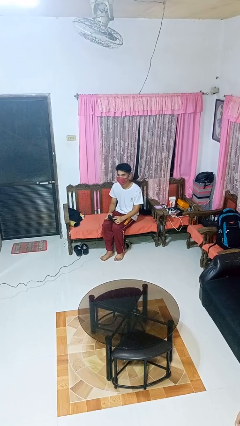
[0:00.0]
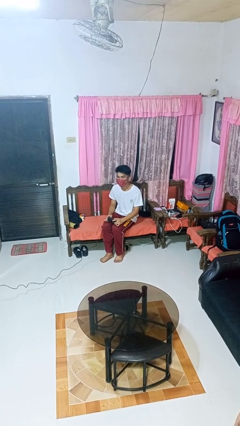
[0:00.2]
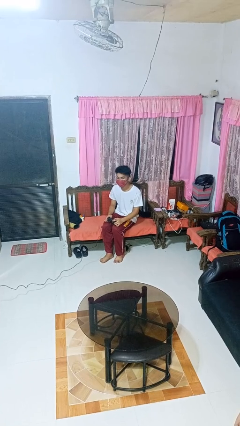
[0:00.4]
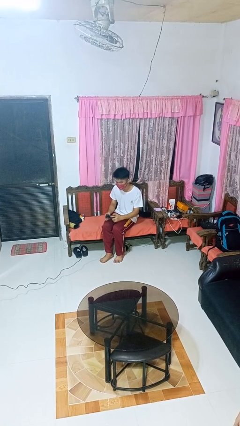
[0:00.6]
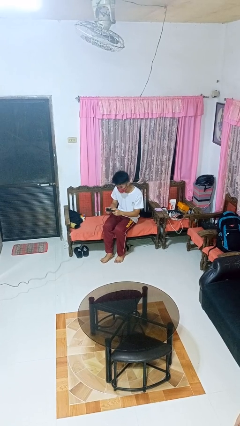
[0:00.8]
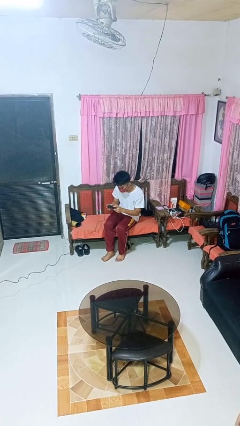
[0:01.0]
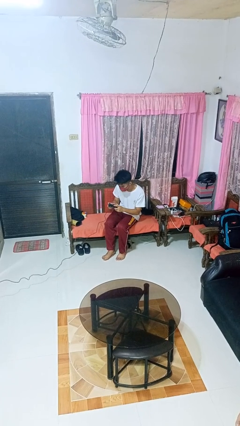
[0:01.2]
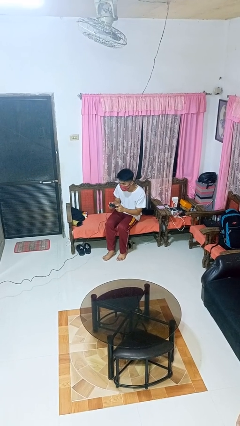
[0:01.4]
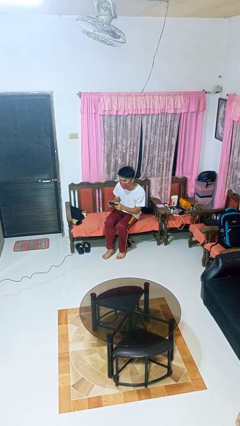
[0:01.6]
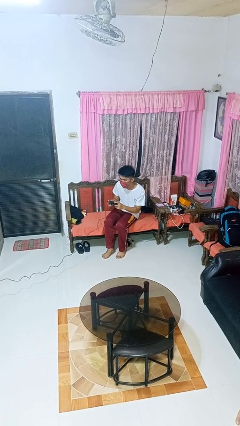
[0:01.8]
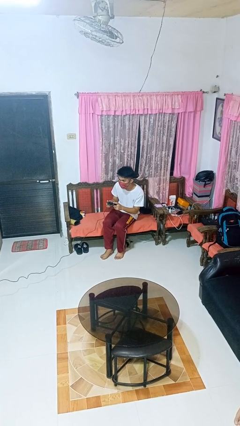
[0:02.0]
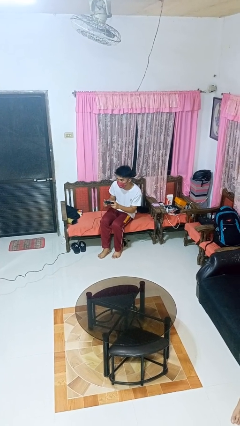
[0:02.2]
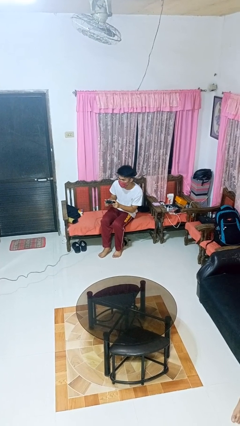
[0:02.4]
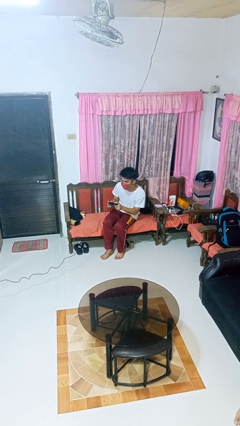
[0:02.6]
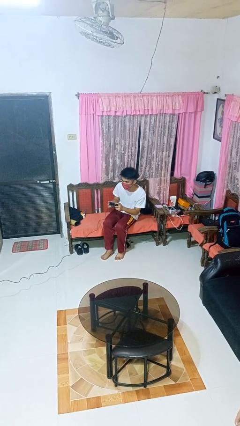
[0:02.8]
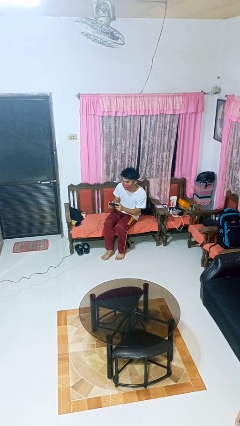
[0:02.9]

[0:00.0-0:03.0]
person interacts with handheld game

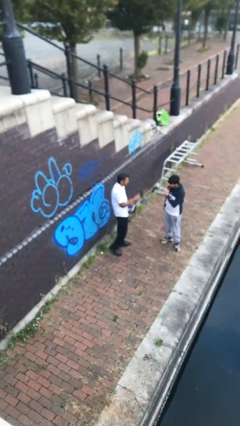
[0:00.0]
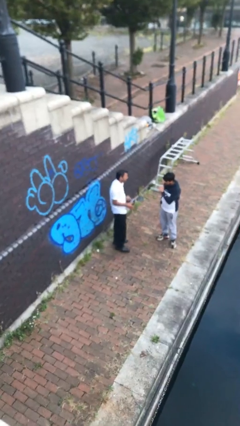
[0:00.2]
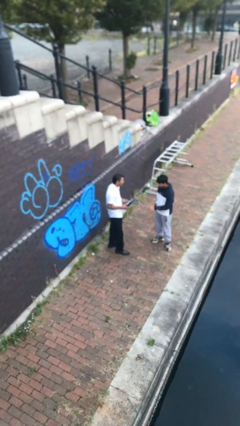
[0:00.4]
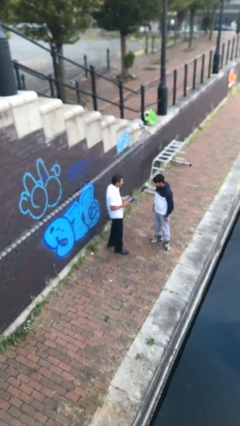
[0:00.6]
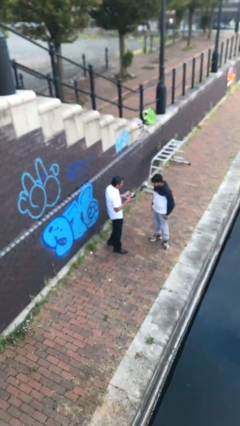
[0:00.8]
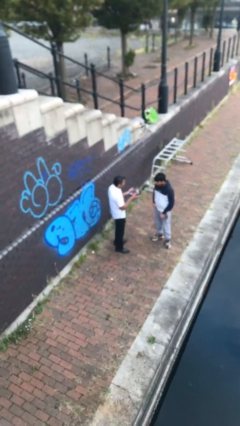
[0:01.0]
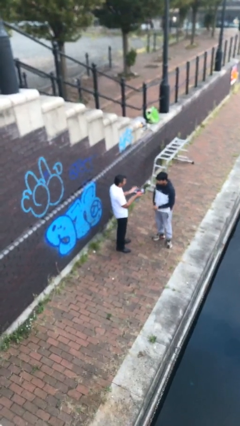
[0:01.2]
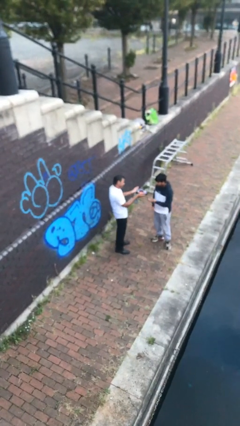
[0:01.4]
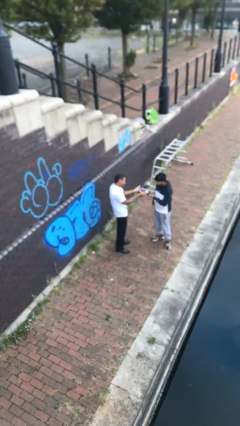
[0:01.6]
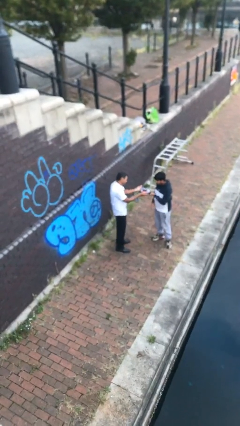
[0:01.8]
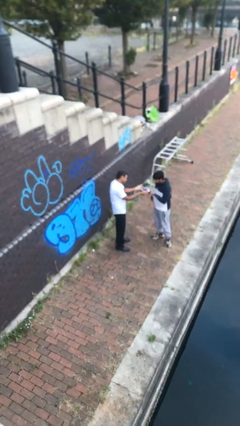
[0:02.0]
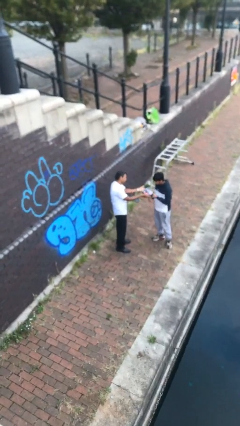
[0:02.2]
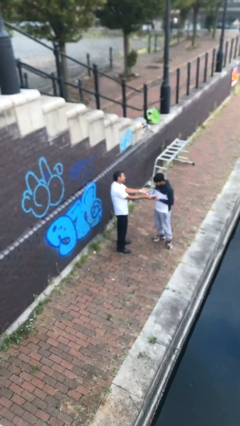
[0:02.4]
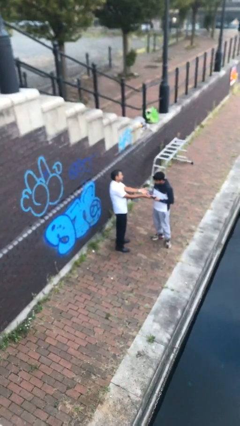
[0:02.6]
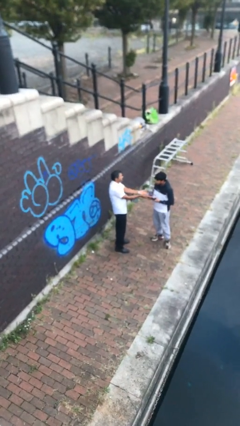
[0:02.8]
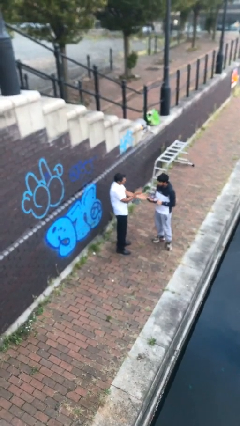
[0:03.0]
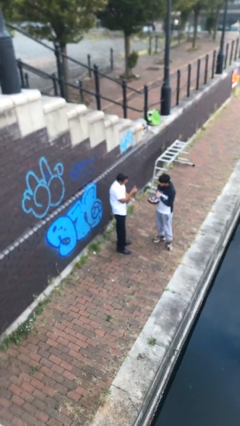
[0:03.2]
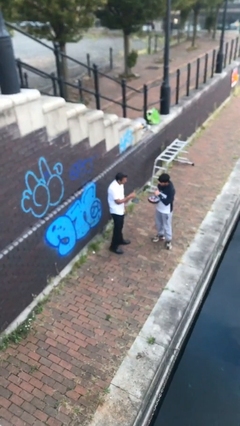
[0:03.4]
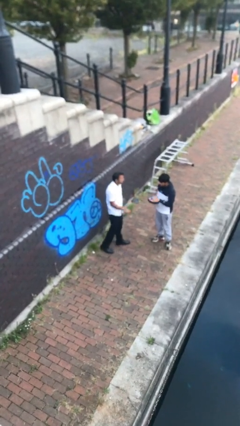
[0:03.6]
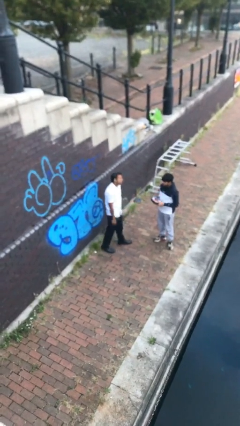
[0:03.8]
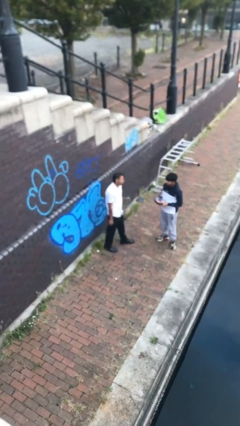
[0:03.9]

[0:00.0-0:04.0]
person transfers object to person

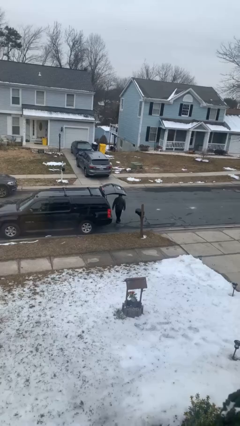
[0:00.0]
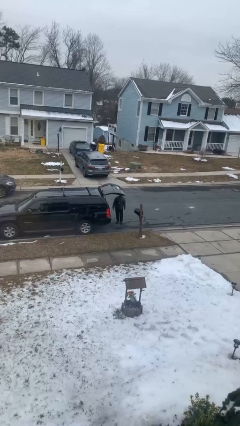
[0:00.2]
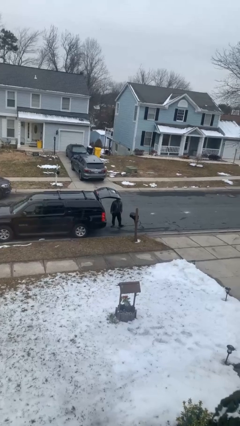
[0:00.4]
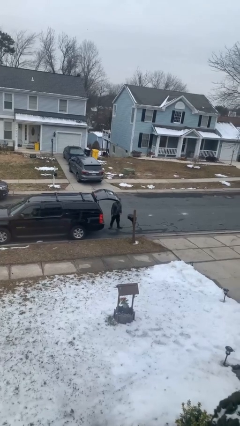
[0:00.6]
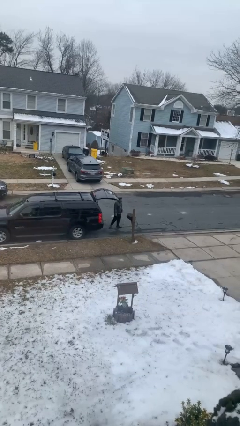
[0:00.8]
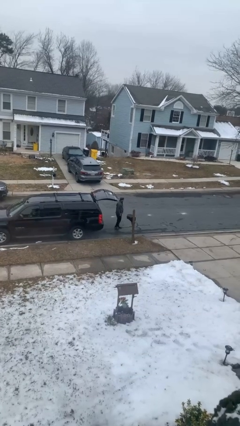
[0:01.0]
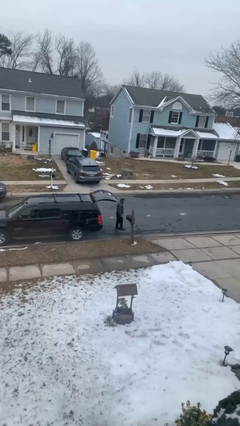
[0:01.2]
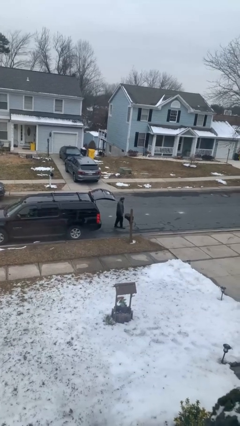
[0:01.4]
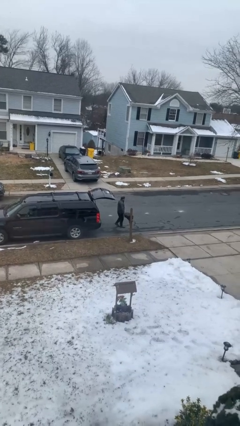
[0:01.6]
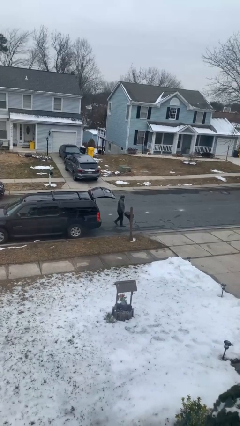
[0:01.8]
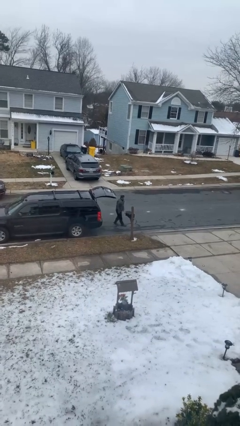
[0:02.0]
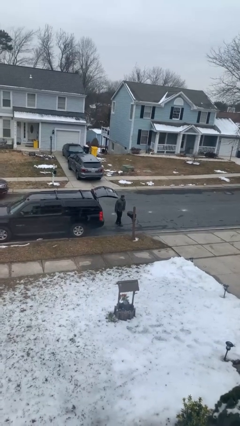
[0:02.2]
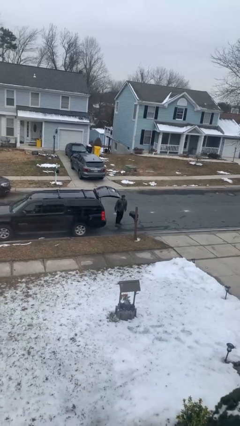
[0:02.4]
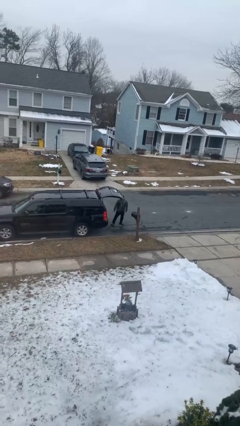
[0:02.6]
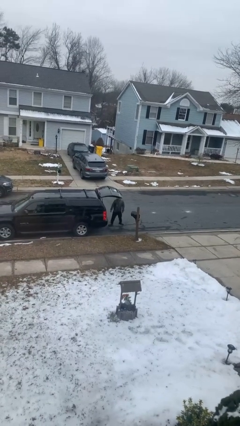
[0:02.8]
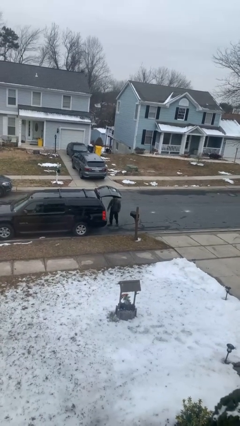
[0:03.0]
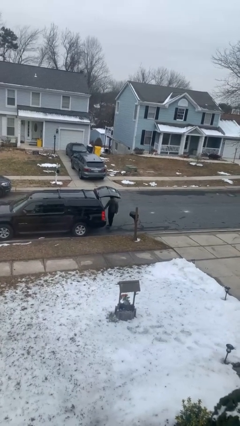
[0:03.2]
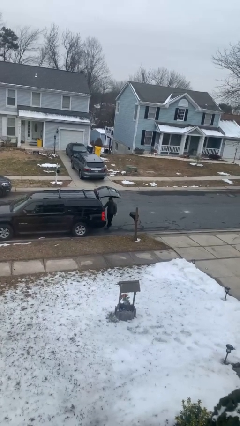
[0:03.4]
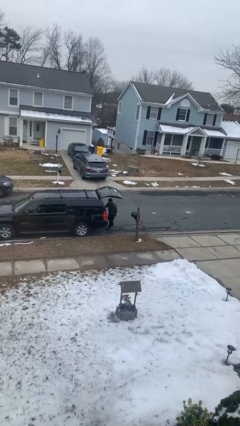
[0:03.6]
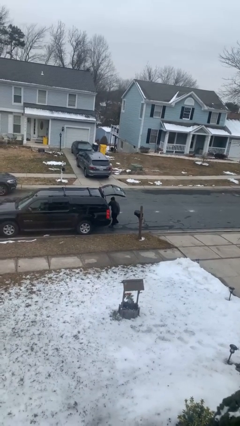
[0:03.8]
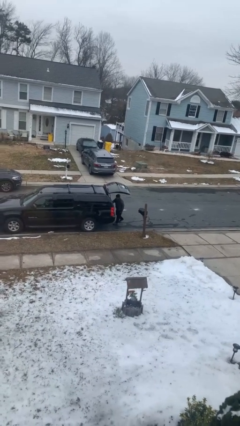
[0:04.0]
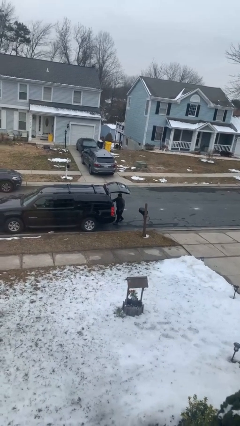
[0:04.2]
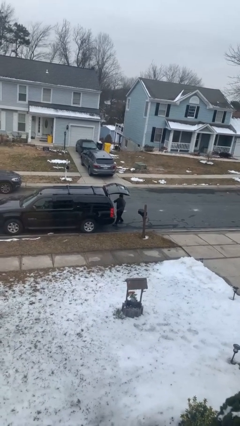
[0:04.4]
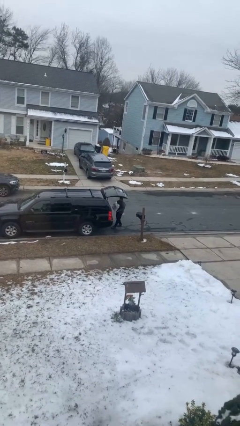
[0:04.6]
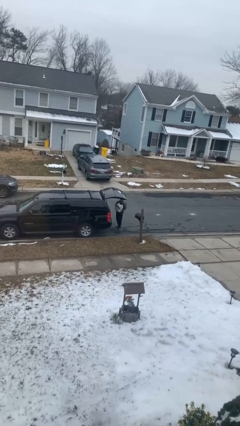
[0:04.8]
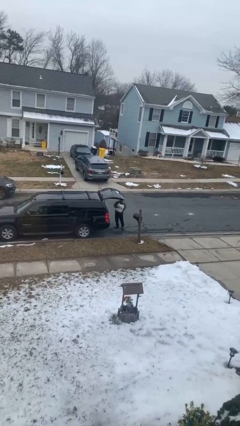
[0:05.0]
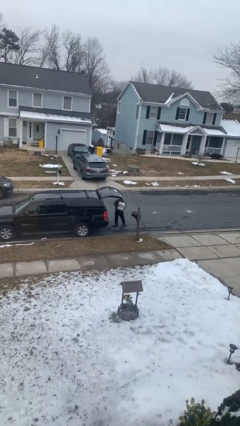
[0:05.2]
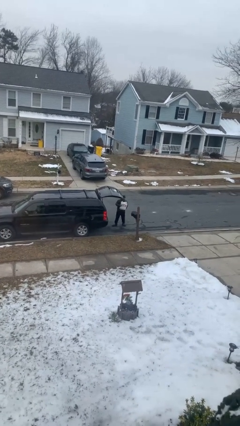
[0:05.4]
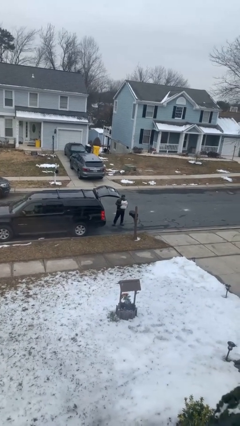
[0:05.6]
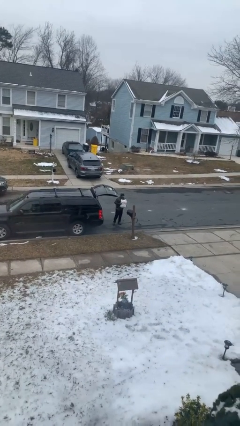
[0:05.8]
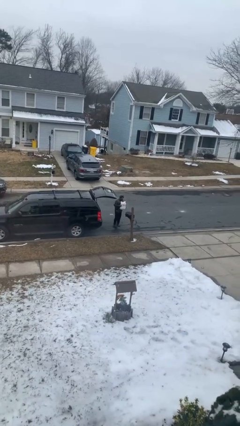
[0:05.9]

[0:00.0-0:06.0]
person unloads car

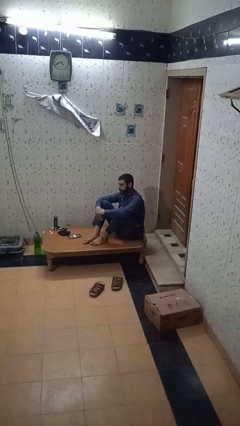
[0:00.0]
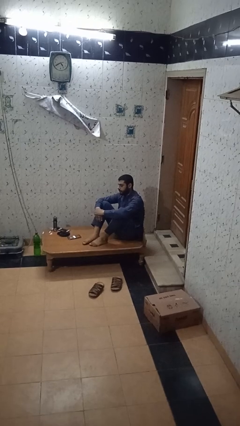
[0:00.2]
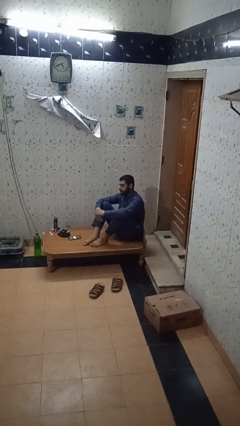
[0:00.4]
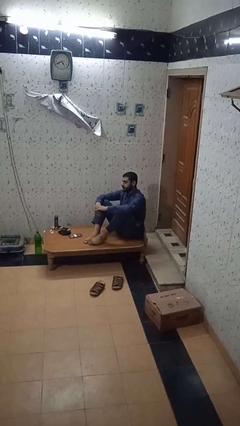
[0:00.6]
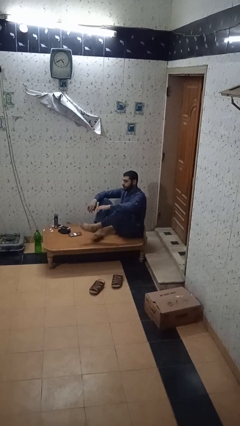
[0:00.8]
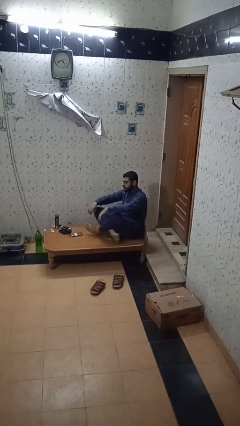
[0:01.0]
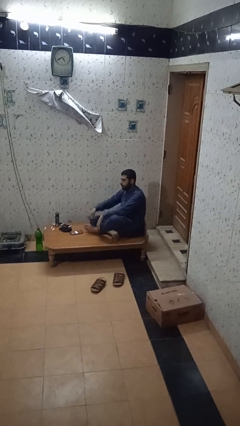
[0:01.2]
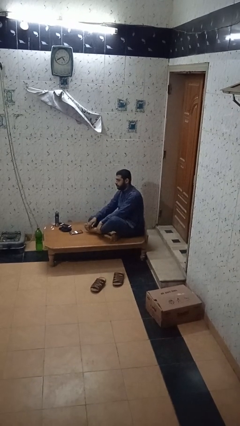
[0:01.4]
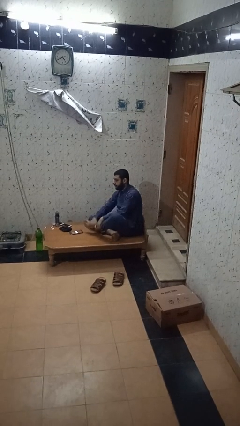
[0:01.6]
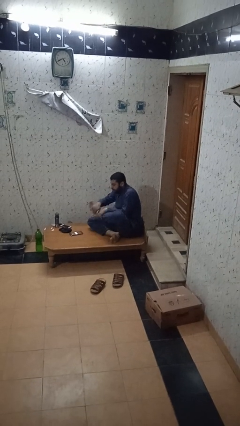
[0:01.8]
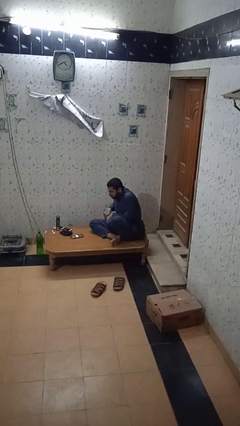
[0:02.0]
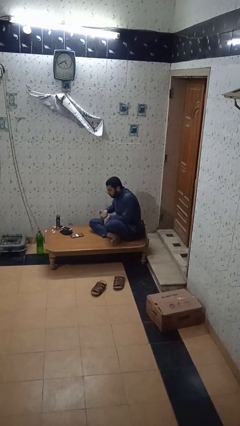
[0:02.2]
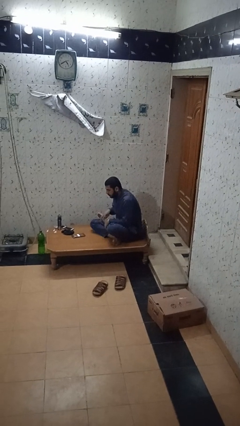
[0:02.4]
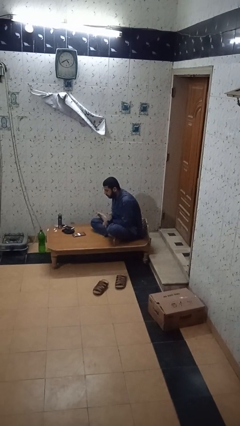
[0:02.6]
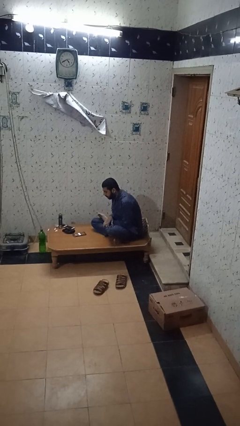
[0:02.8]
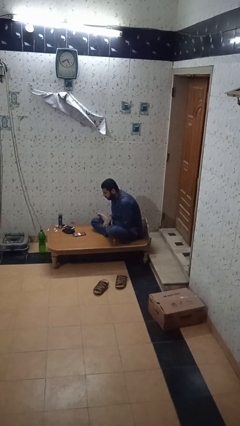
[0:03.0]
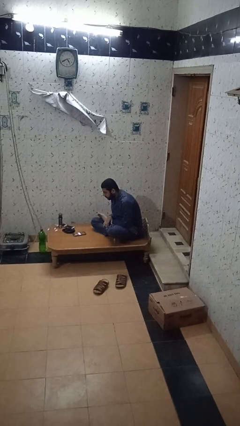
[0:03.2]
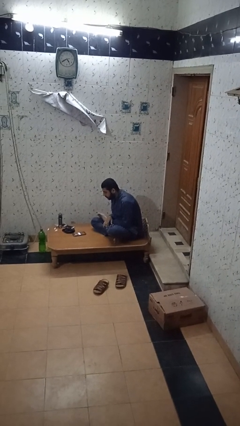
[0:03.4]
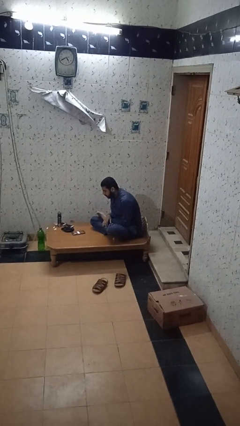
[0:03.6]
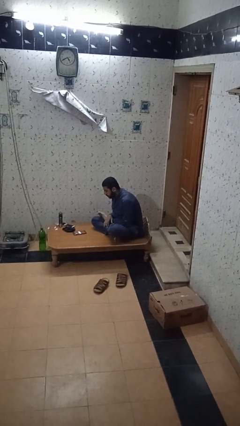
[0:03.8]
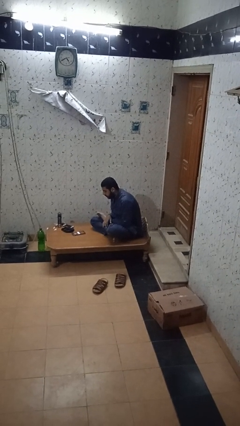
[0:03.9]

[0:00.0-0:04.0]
person crosses legs

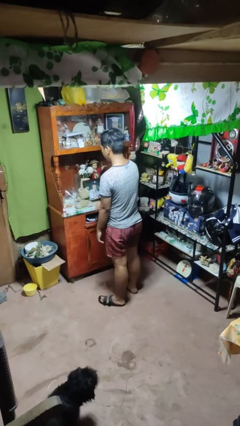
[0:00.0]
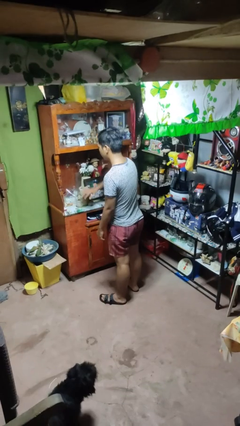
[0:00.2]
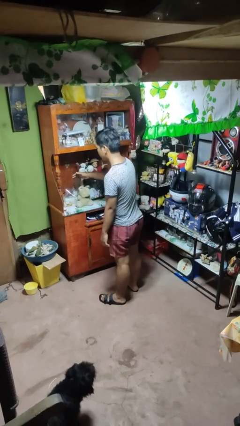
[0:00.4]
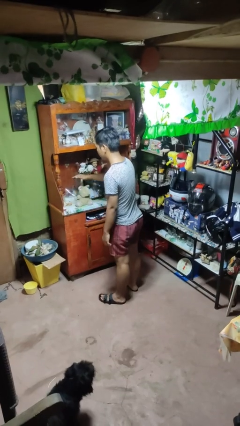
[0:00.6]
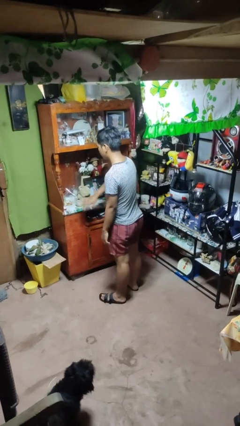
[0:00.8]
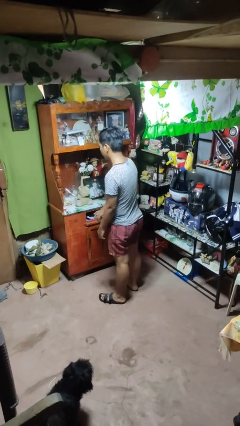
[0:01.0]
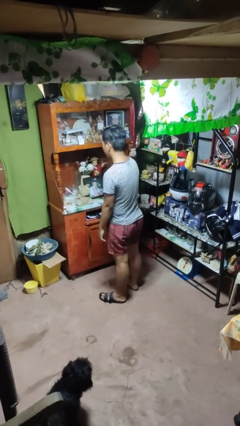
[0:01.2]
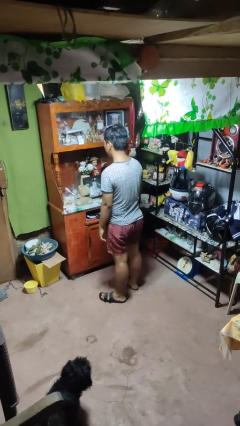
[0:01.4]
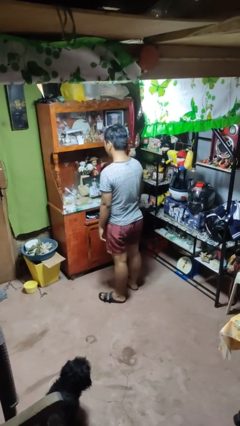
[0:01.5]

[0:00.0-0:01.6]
person waves hand over object
